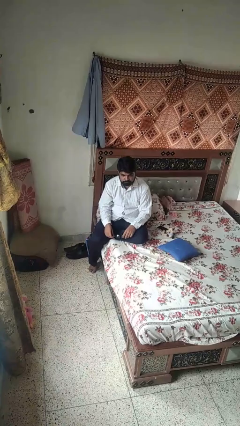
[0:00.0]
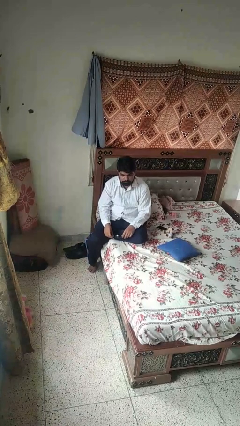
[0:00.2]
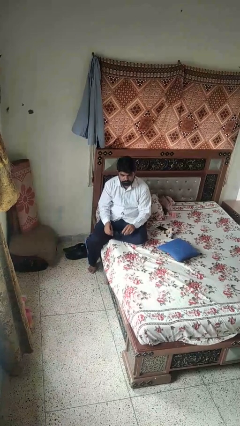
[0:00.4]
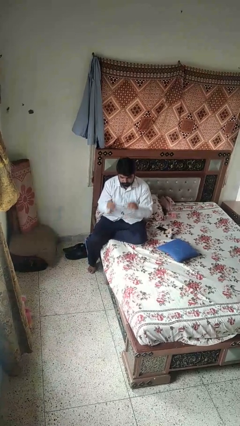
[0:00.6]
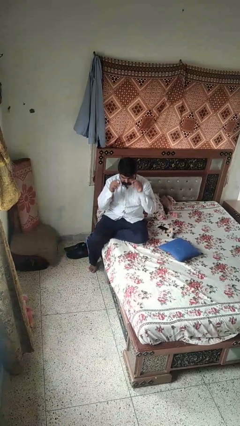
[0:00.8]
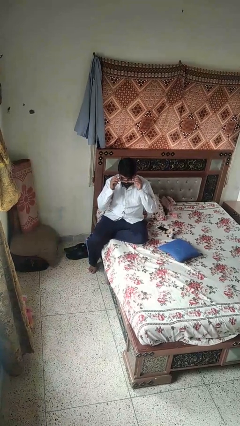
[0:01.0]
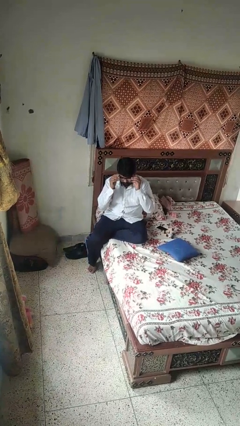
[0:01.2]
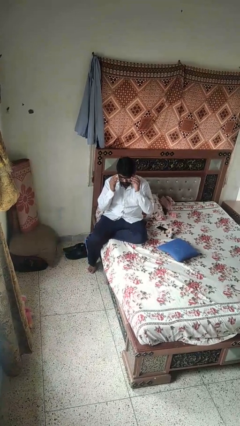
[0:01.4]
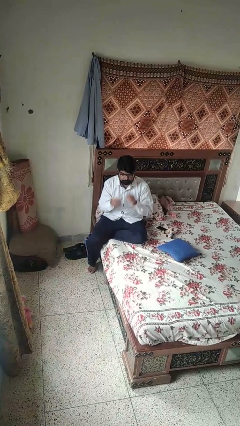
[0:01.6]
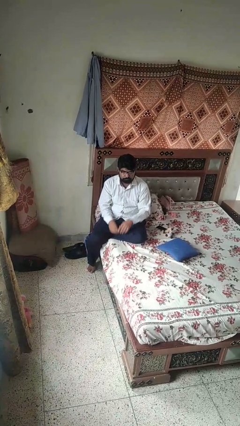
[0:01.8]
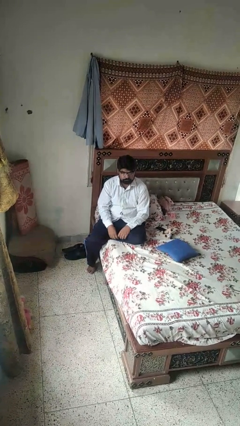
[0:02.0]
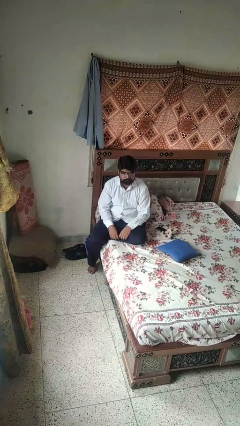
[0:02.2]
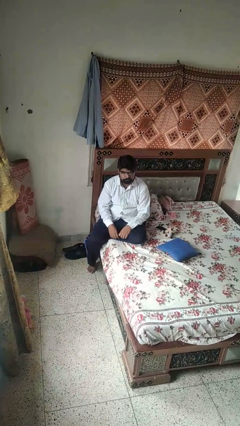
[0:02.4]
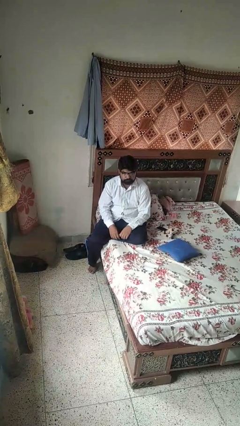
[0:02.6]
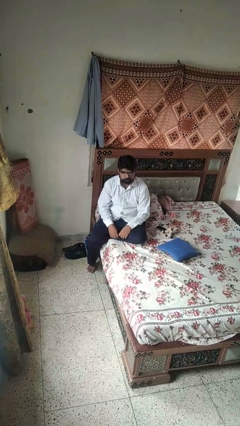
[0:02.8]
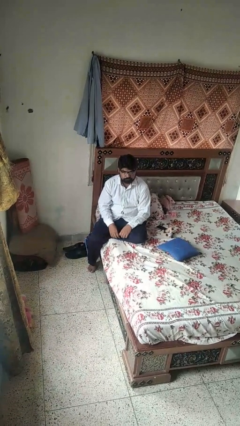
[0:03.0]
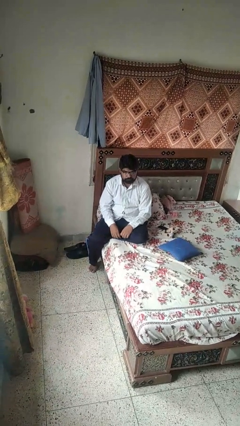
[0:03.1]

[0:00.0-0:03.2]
person puts on glasses

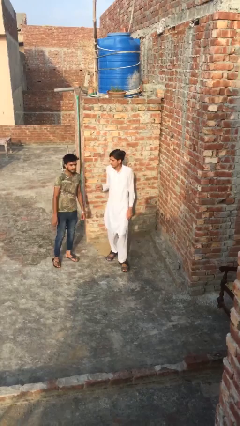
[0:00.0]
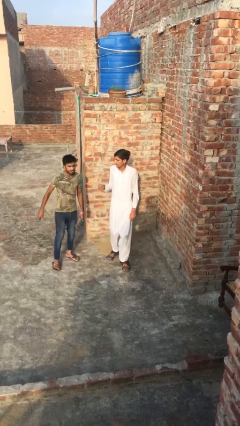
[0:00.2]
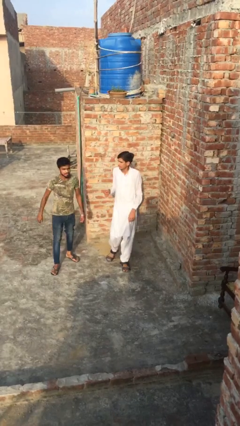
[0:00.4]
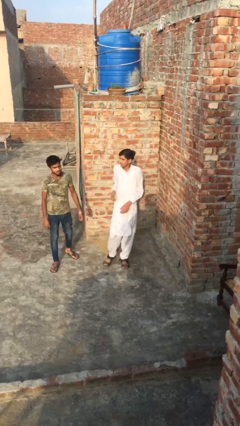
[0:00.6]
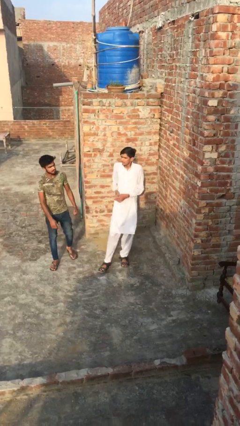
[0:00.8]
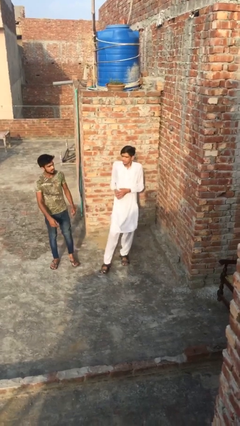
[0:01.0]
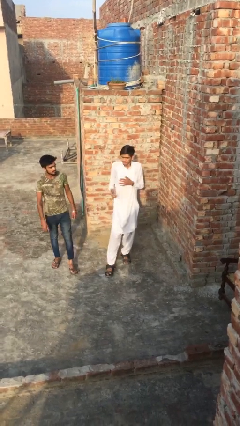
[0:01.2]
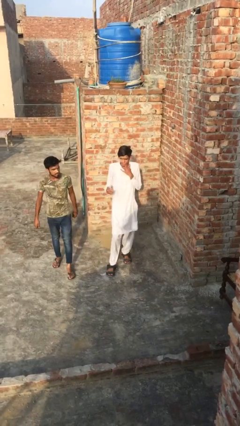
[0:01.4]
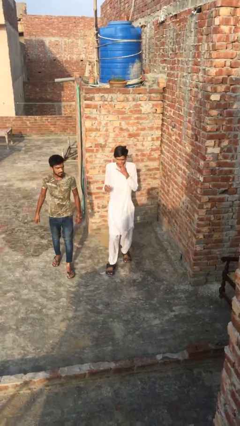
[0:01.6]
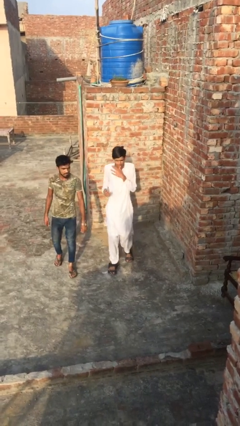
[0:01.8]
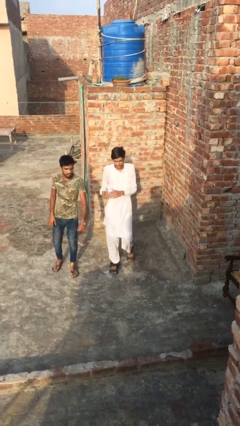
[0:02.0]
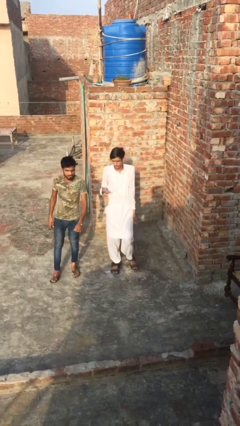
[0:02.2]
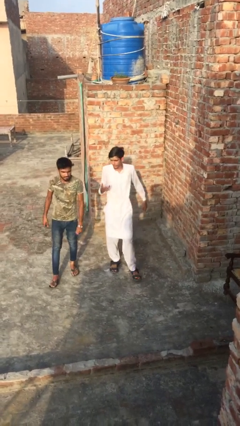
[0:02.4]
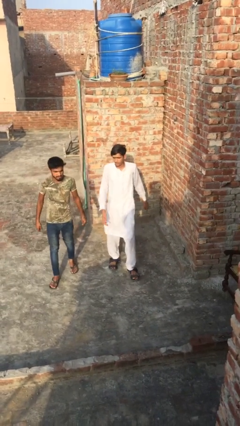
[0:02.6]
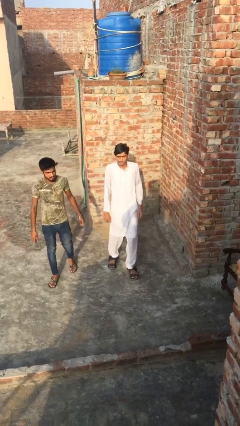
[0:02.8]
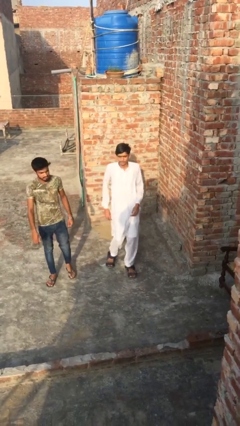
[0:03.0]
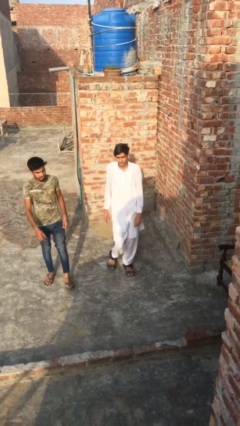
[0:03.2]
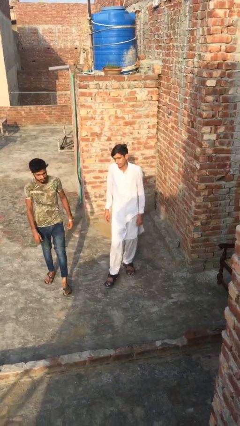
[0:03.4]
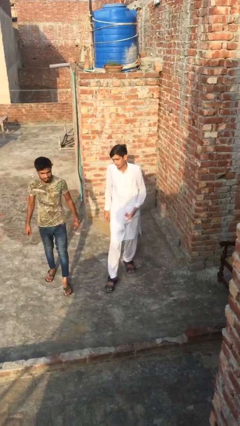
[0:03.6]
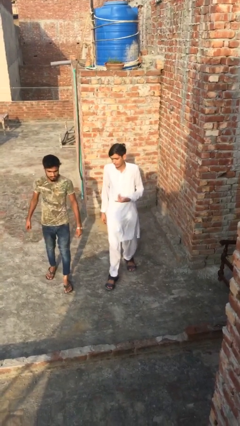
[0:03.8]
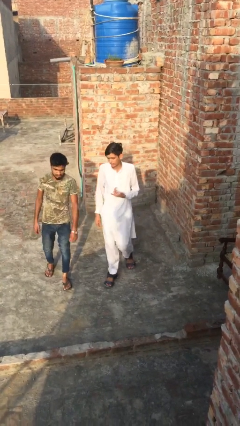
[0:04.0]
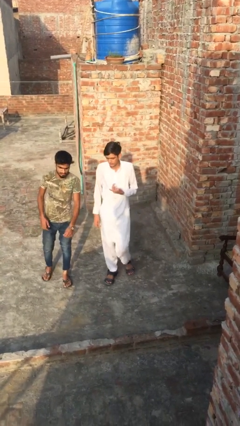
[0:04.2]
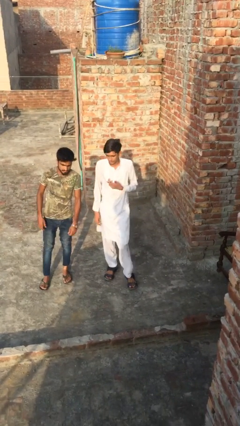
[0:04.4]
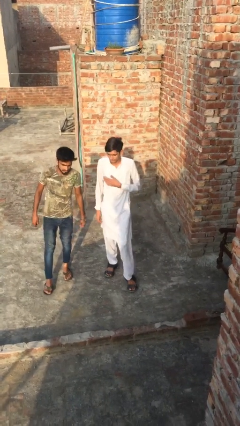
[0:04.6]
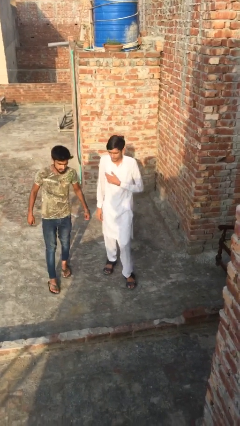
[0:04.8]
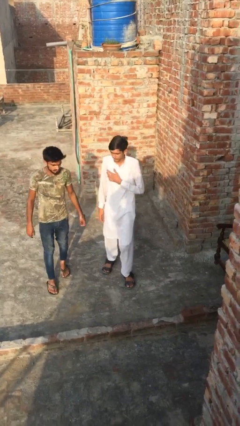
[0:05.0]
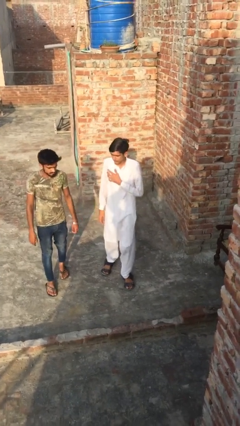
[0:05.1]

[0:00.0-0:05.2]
person talks to person

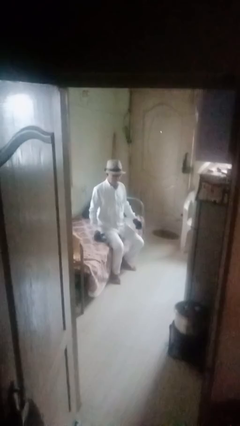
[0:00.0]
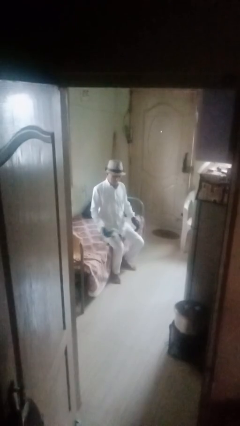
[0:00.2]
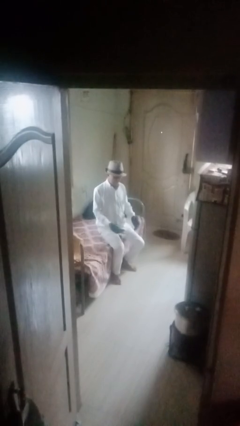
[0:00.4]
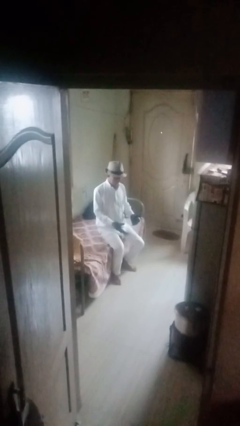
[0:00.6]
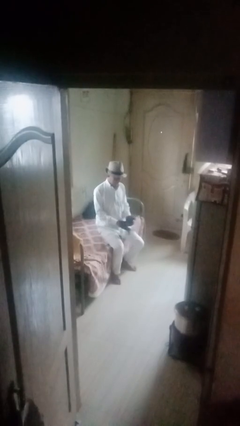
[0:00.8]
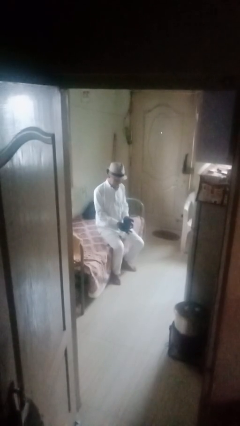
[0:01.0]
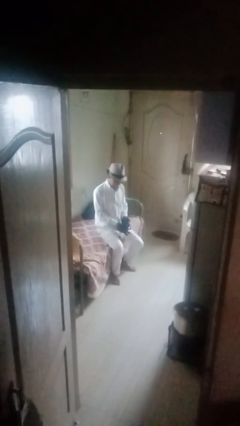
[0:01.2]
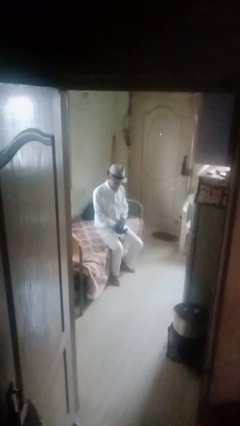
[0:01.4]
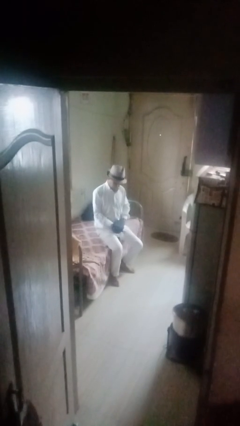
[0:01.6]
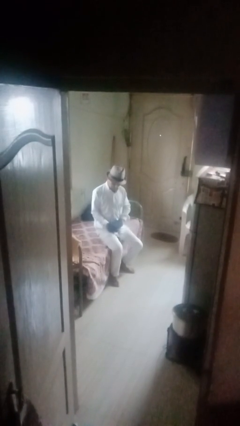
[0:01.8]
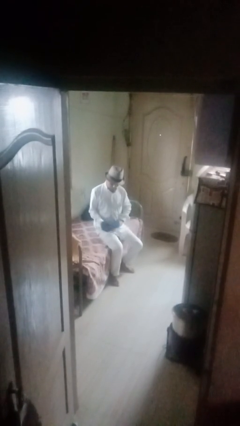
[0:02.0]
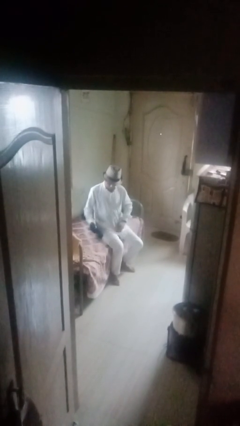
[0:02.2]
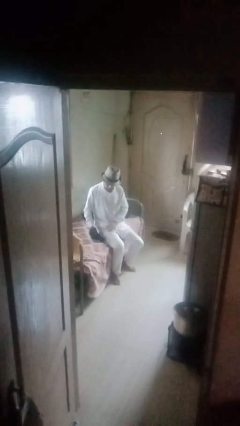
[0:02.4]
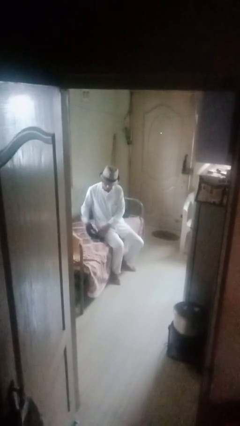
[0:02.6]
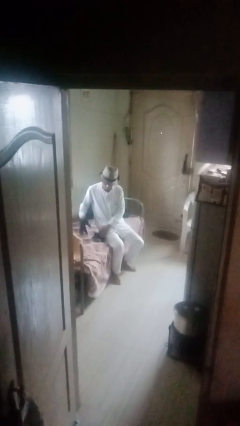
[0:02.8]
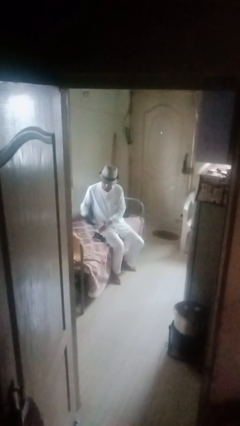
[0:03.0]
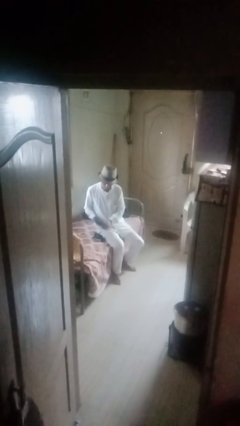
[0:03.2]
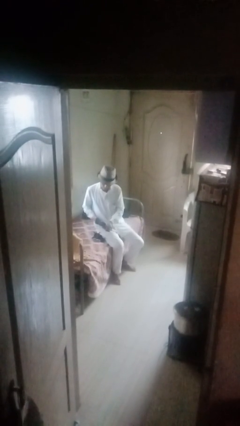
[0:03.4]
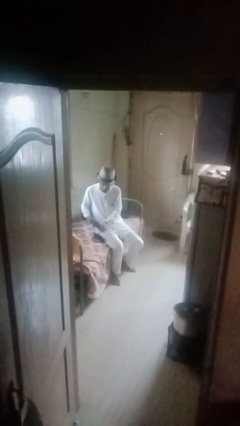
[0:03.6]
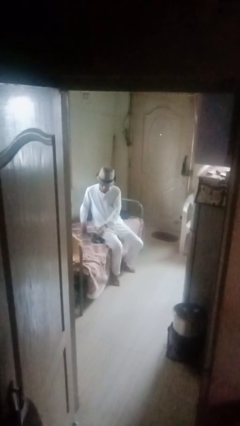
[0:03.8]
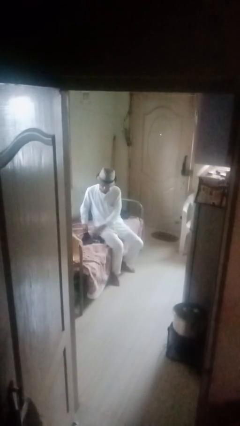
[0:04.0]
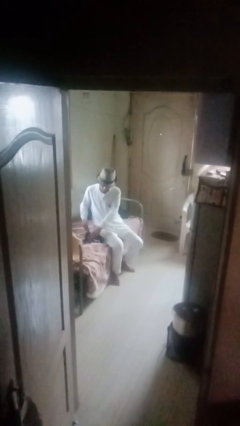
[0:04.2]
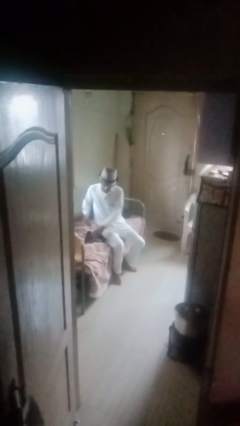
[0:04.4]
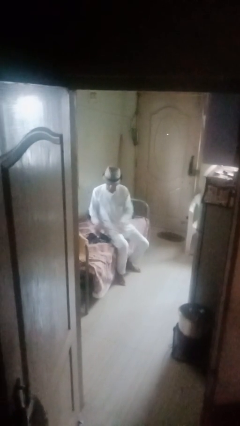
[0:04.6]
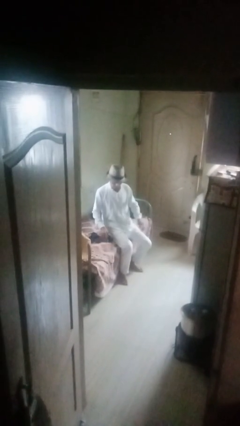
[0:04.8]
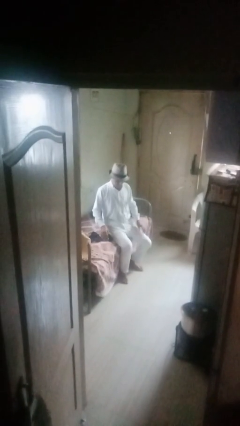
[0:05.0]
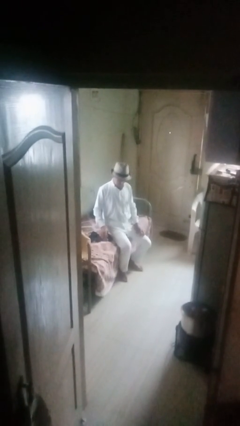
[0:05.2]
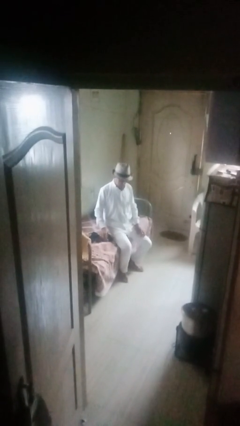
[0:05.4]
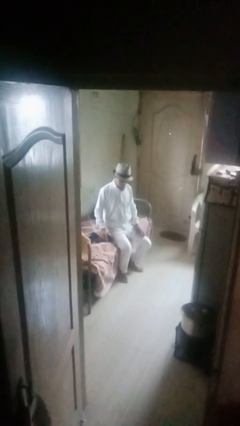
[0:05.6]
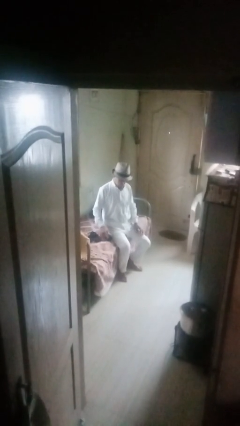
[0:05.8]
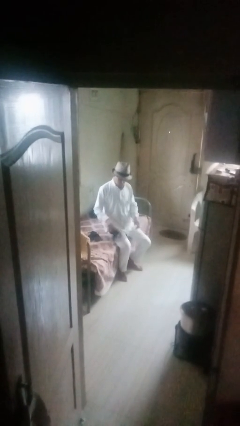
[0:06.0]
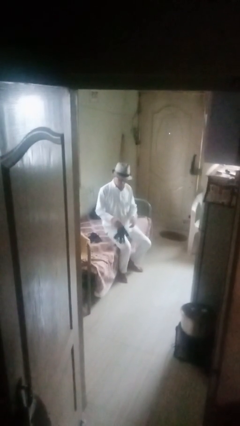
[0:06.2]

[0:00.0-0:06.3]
person takes off gloves

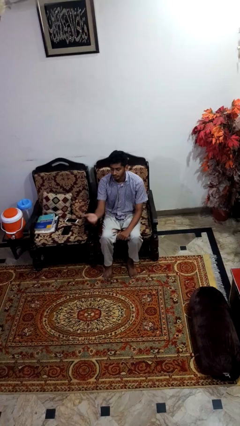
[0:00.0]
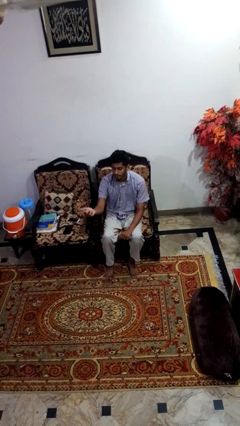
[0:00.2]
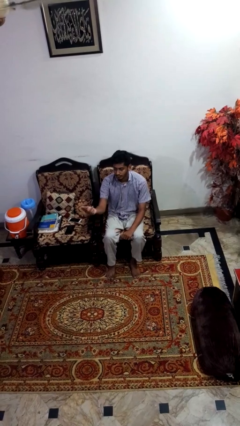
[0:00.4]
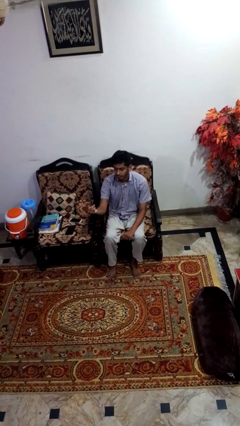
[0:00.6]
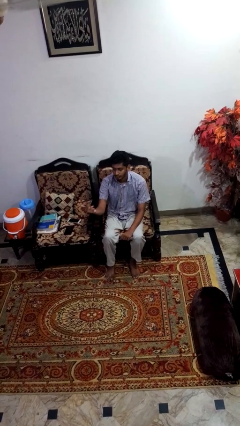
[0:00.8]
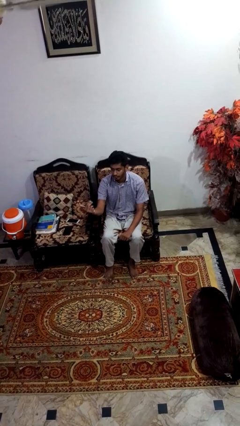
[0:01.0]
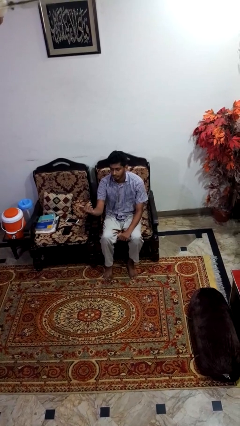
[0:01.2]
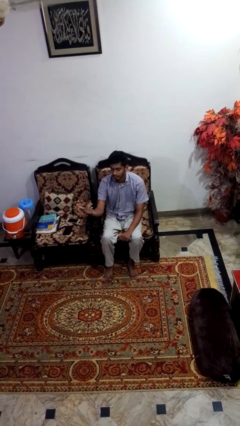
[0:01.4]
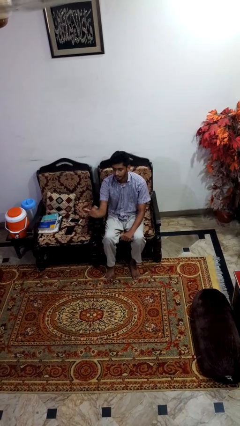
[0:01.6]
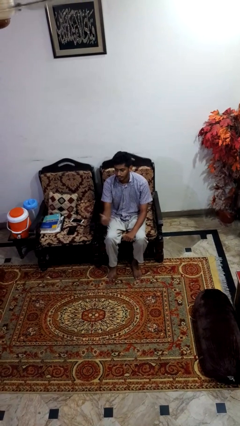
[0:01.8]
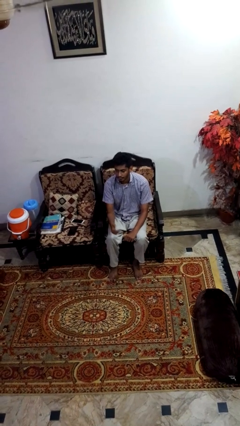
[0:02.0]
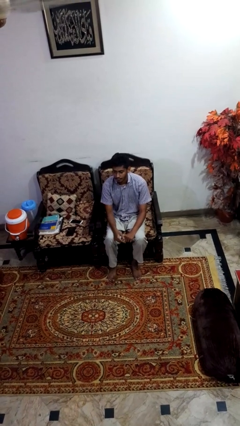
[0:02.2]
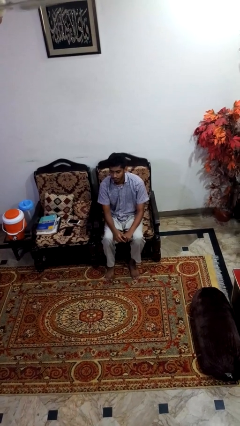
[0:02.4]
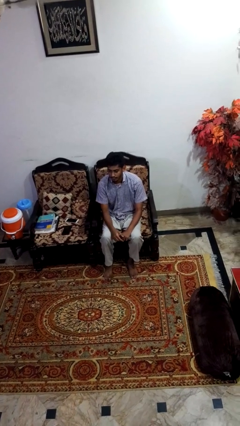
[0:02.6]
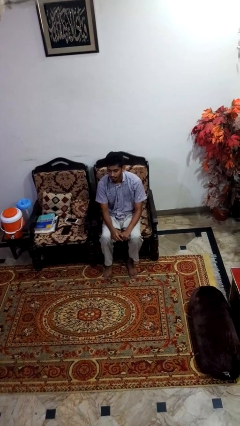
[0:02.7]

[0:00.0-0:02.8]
person gestures come here

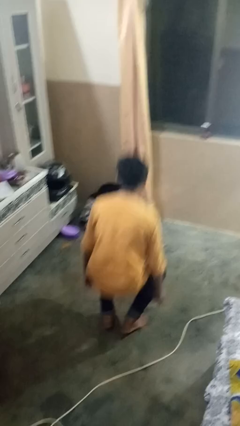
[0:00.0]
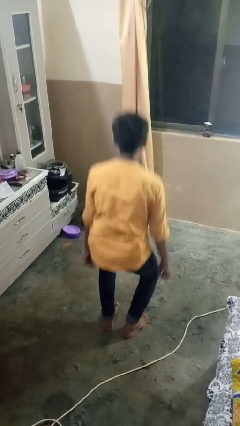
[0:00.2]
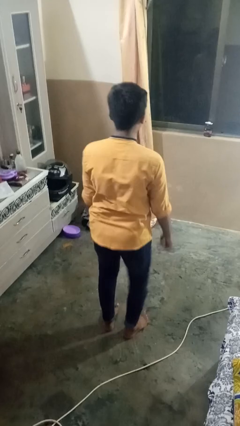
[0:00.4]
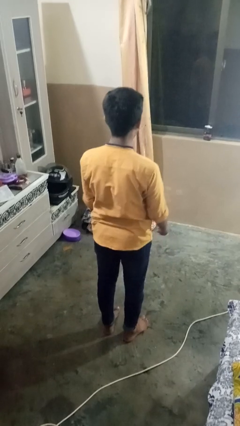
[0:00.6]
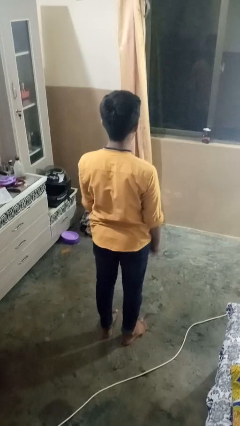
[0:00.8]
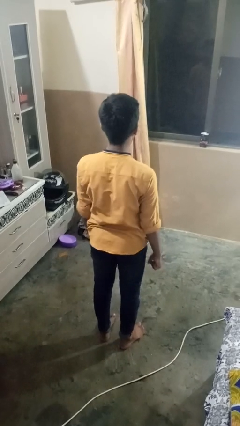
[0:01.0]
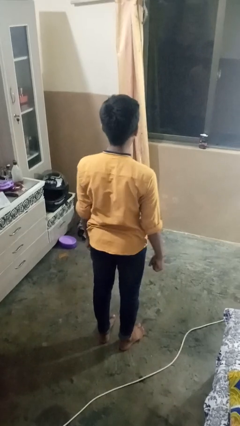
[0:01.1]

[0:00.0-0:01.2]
person exercises with situp
